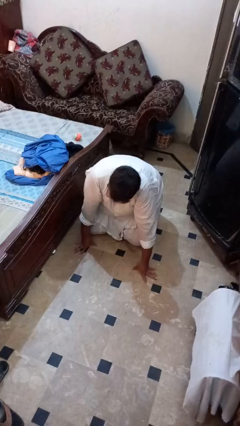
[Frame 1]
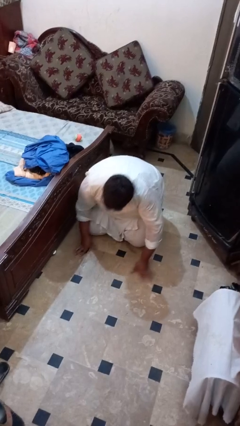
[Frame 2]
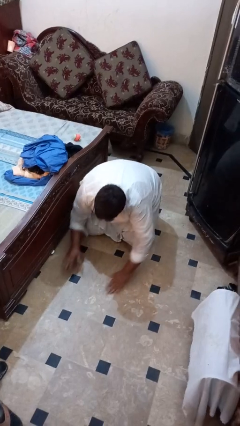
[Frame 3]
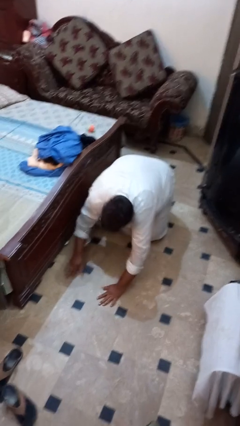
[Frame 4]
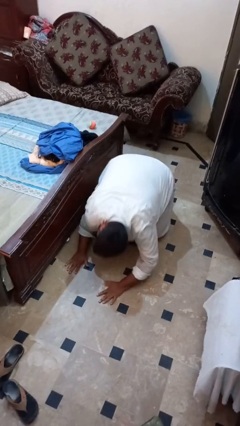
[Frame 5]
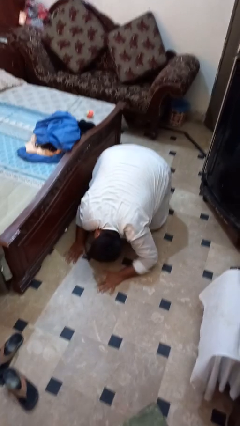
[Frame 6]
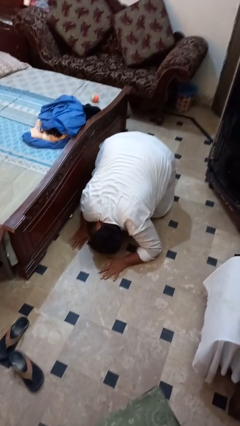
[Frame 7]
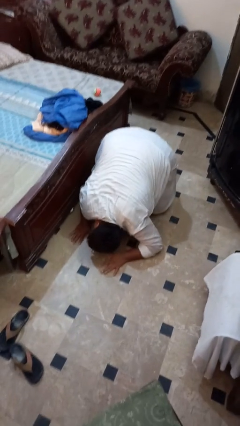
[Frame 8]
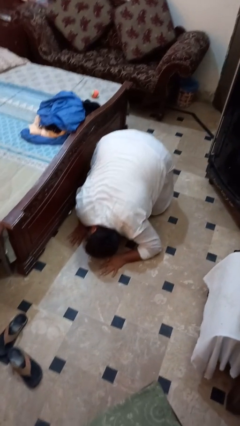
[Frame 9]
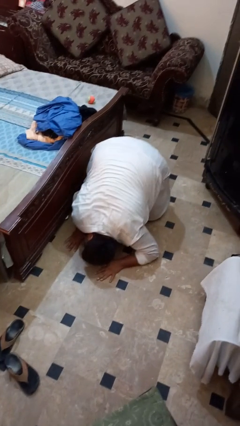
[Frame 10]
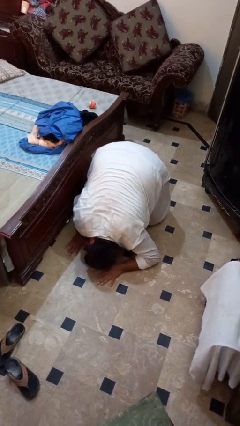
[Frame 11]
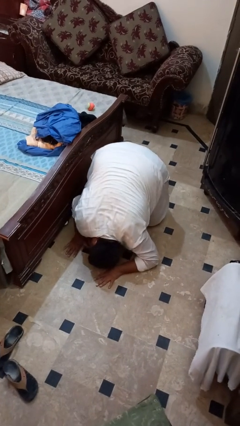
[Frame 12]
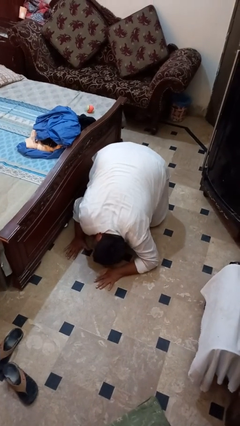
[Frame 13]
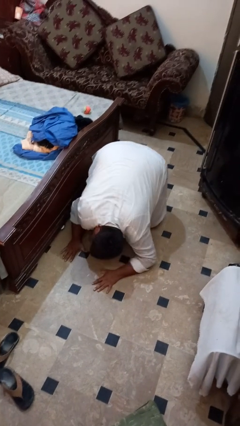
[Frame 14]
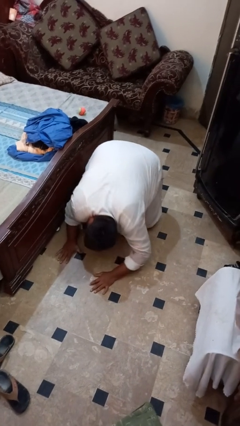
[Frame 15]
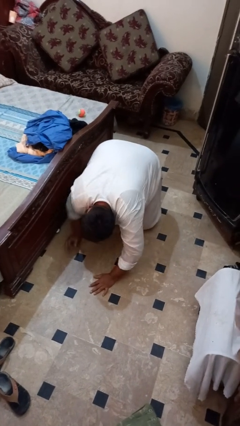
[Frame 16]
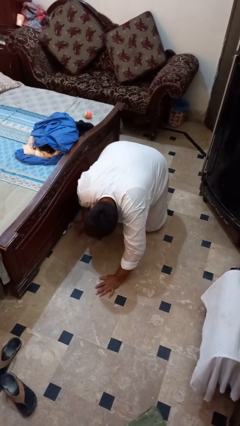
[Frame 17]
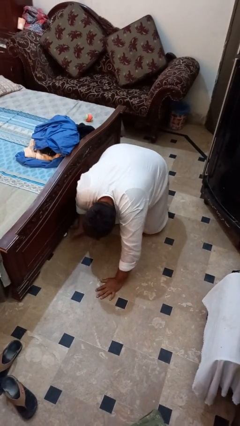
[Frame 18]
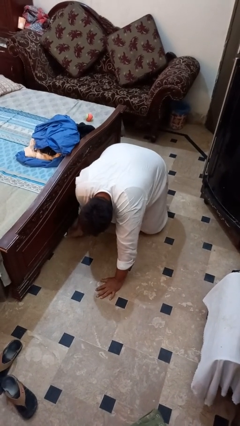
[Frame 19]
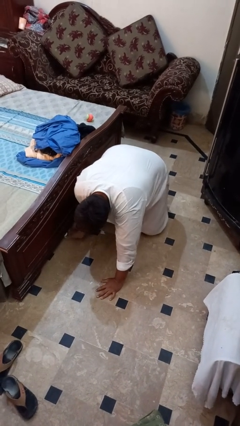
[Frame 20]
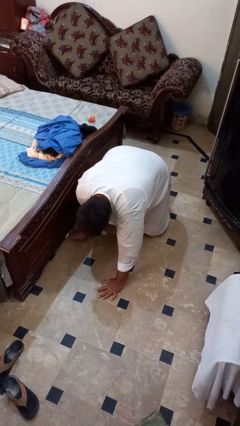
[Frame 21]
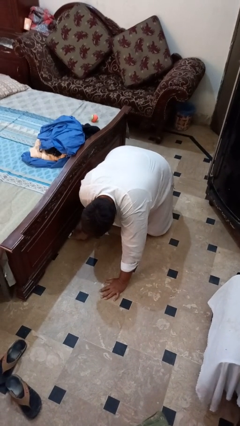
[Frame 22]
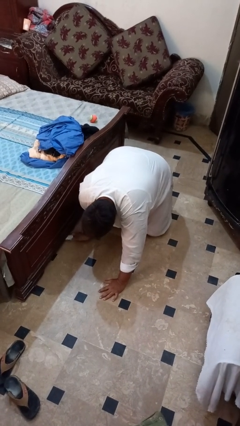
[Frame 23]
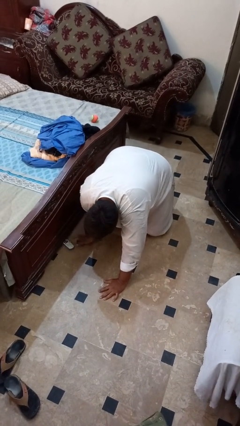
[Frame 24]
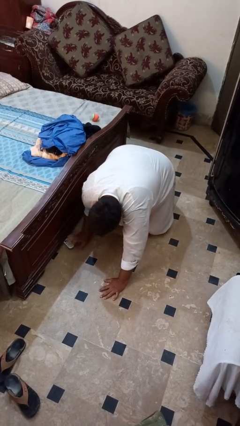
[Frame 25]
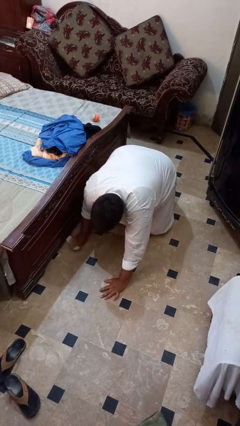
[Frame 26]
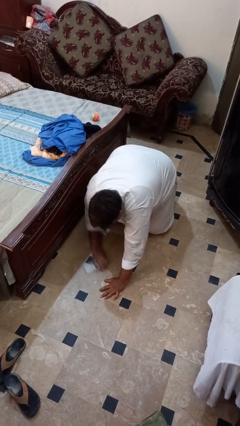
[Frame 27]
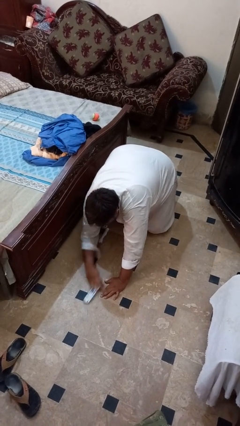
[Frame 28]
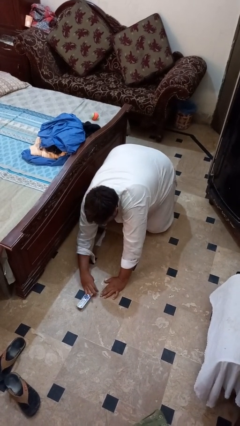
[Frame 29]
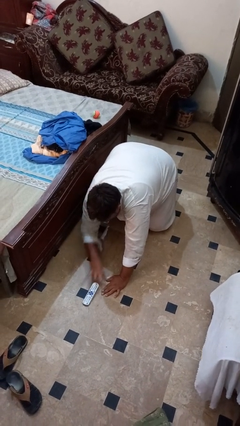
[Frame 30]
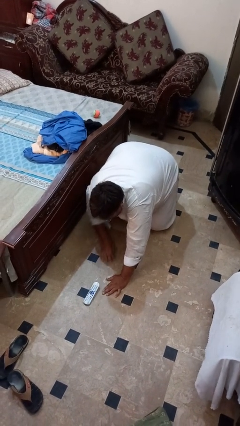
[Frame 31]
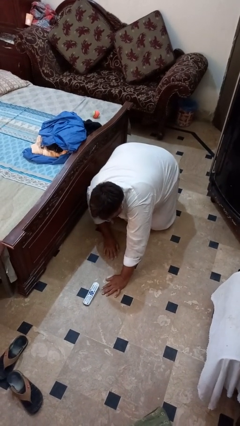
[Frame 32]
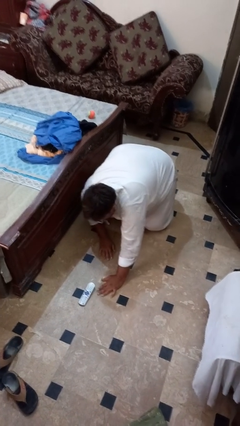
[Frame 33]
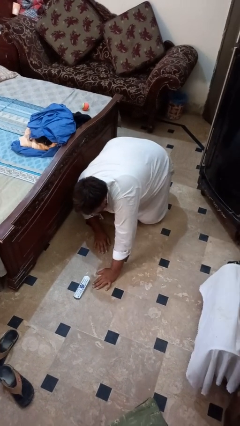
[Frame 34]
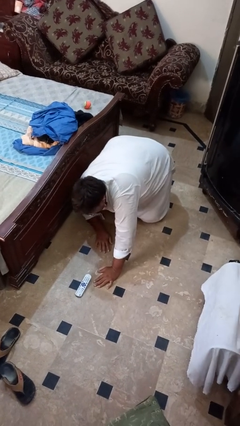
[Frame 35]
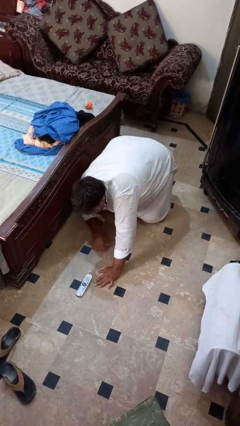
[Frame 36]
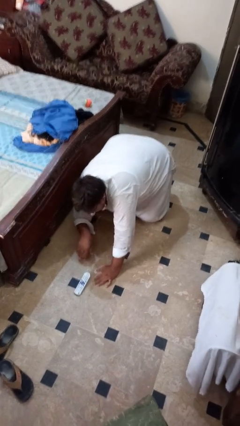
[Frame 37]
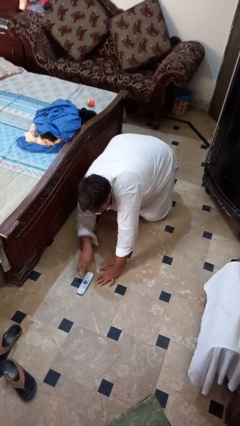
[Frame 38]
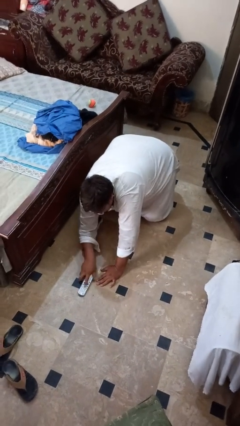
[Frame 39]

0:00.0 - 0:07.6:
person searches under bed

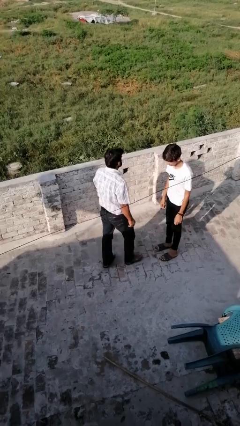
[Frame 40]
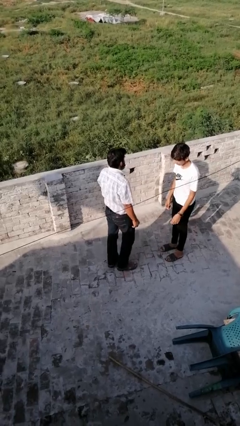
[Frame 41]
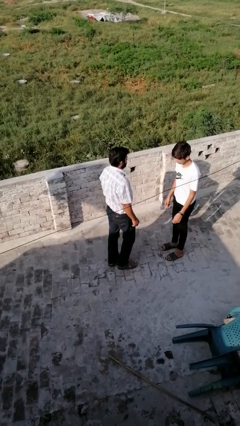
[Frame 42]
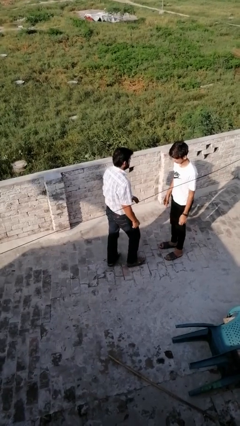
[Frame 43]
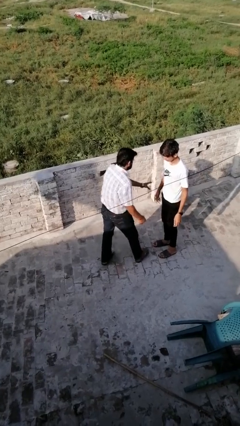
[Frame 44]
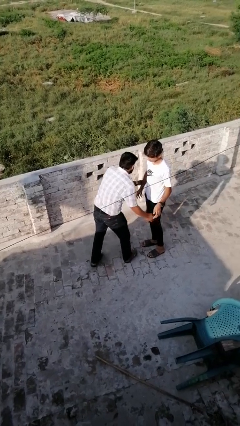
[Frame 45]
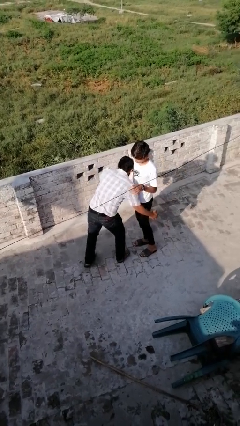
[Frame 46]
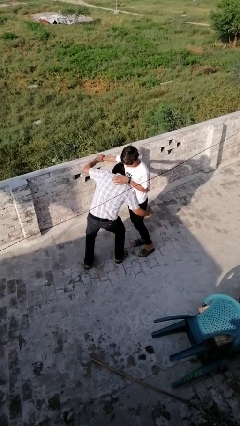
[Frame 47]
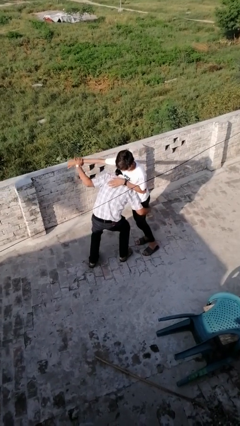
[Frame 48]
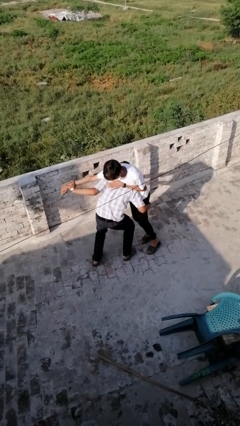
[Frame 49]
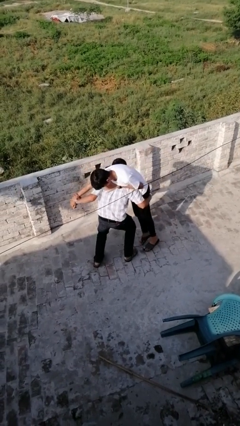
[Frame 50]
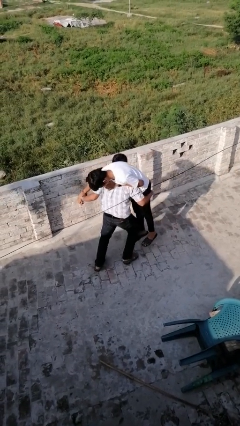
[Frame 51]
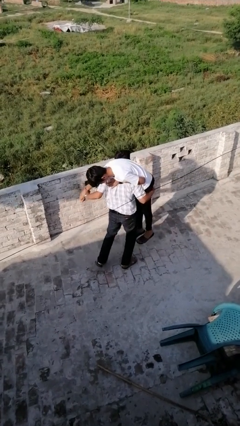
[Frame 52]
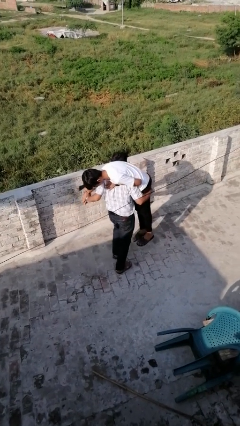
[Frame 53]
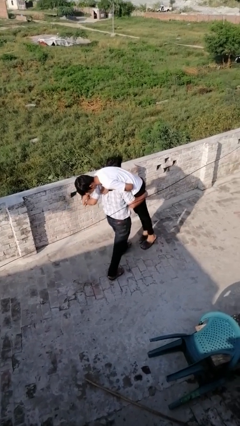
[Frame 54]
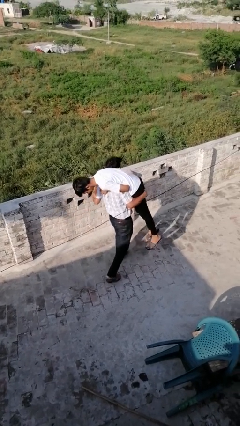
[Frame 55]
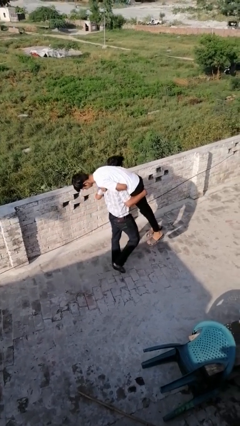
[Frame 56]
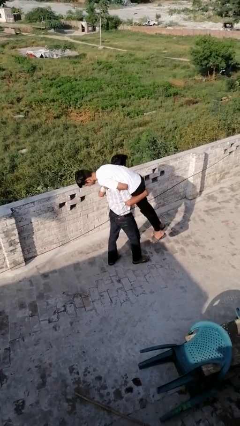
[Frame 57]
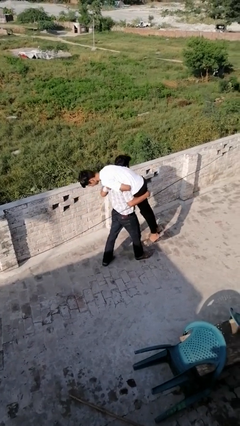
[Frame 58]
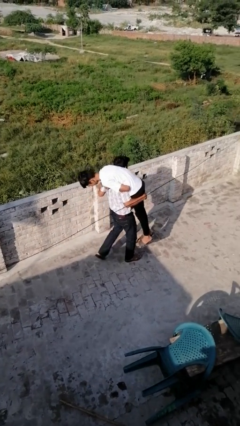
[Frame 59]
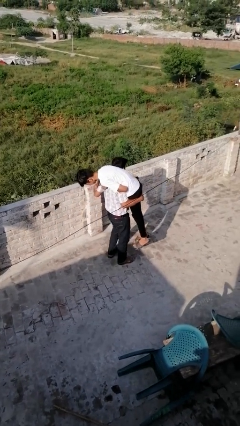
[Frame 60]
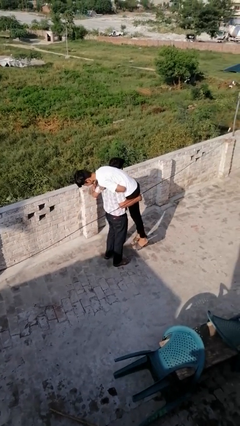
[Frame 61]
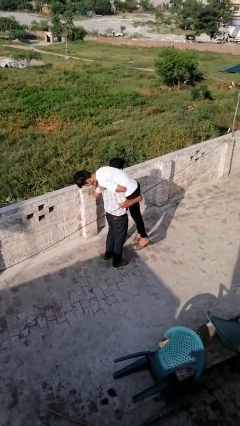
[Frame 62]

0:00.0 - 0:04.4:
person carries person on shoulders

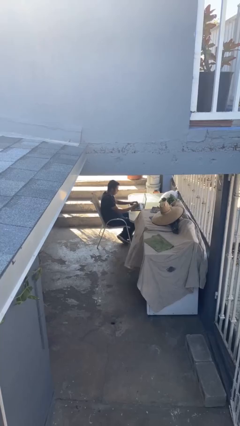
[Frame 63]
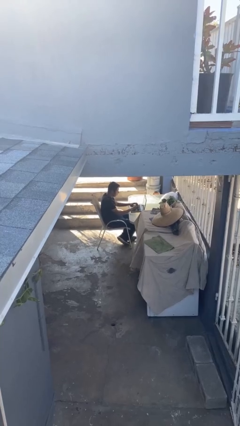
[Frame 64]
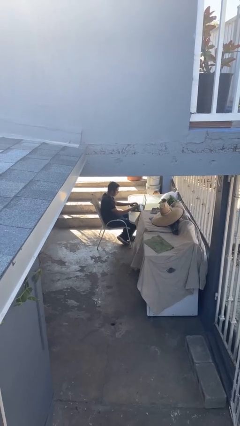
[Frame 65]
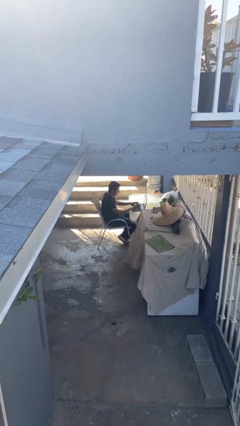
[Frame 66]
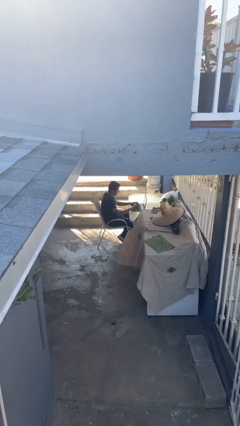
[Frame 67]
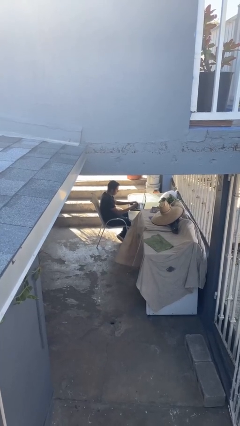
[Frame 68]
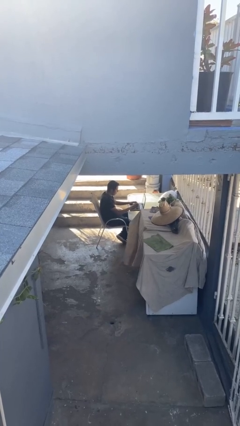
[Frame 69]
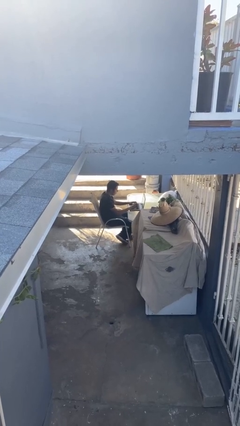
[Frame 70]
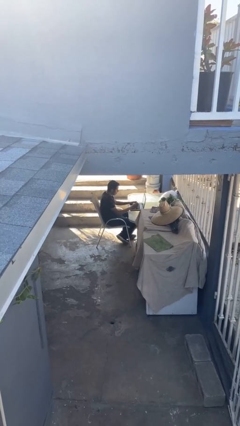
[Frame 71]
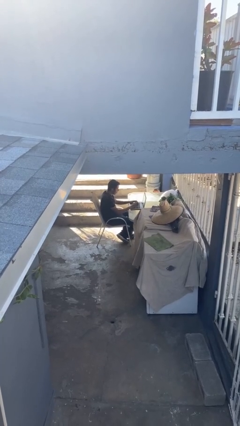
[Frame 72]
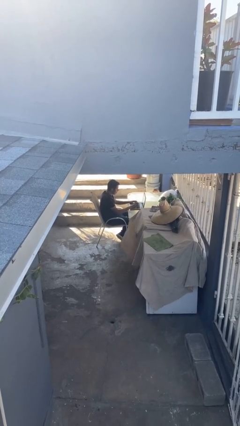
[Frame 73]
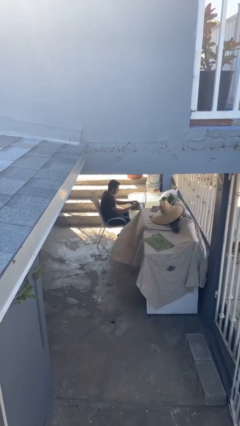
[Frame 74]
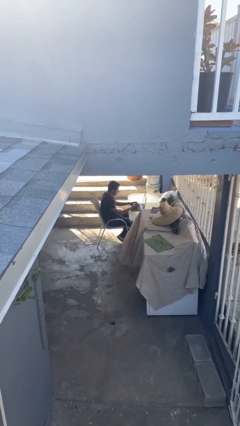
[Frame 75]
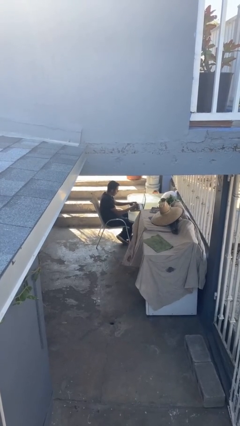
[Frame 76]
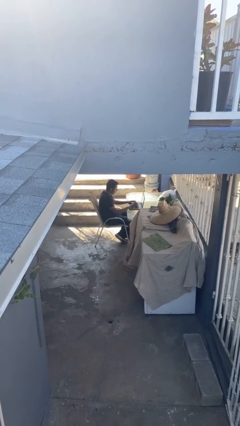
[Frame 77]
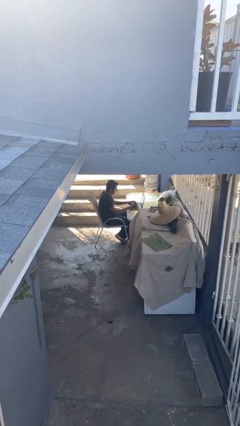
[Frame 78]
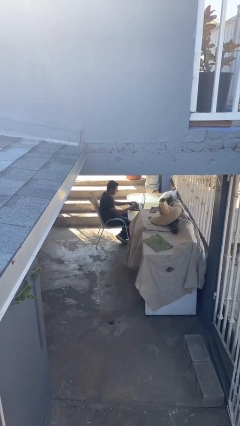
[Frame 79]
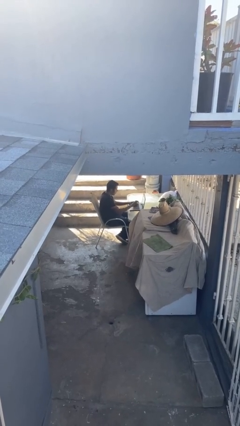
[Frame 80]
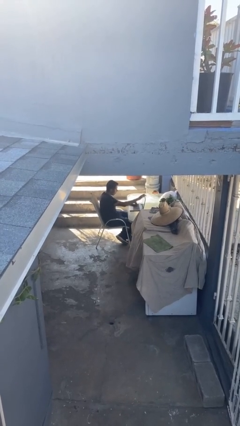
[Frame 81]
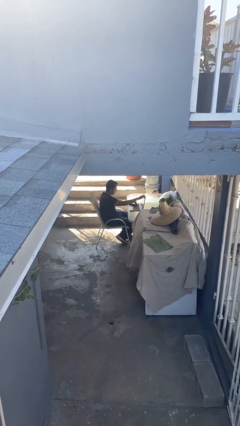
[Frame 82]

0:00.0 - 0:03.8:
person interacts with laptop

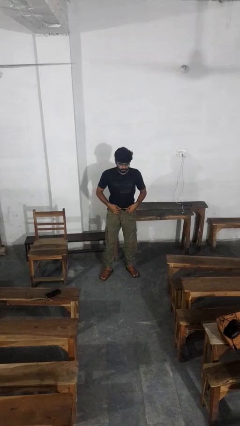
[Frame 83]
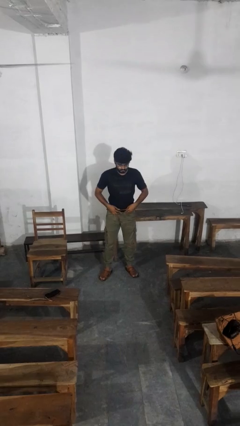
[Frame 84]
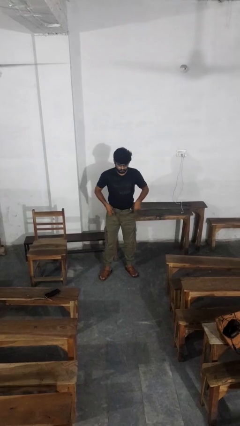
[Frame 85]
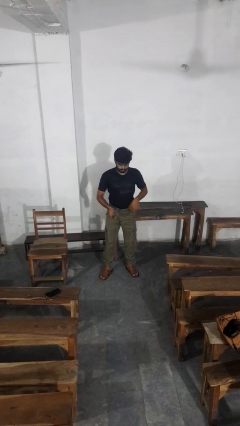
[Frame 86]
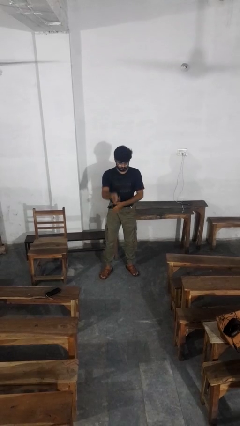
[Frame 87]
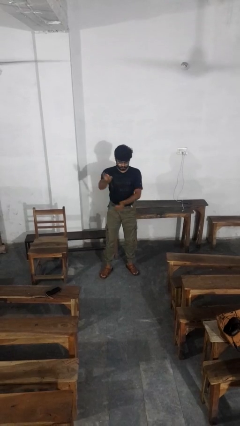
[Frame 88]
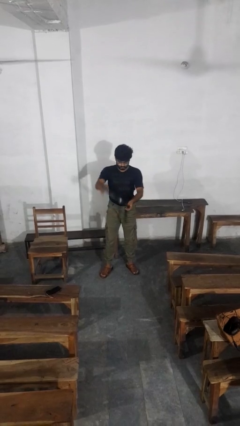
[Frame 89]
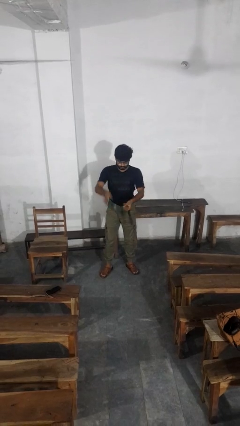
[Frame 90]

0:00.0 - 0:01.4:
person takes off belt

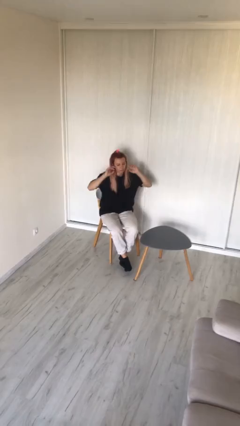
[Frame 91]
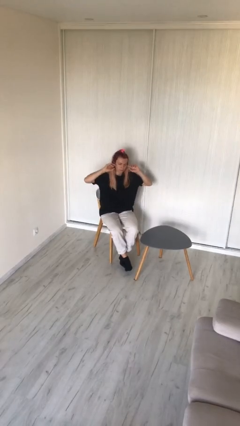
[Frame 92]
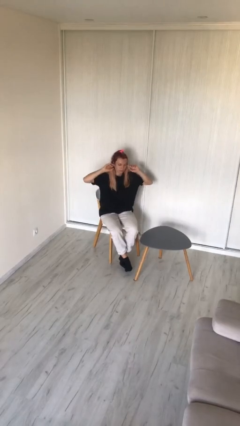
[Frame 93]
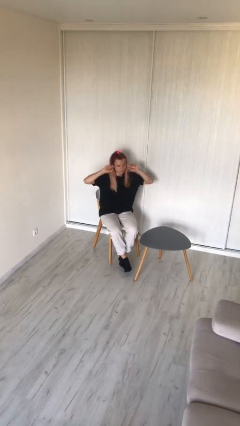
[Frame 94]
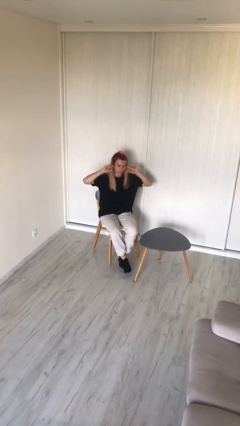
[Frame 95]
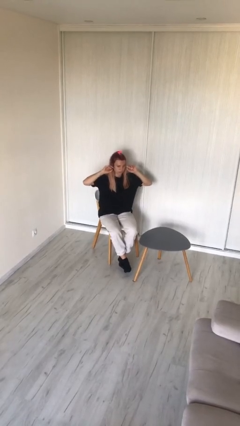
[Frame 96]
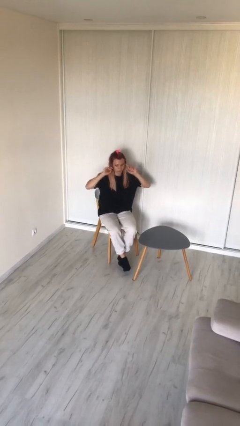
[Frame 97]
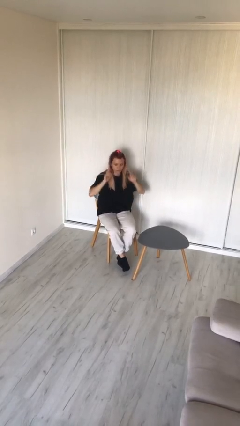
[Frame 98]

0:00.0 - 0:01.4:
person puts fingers in ear
